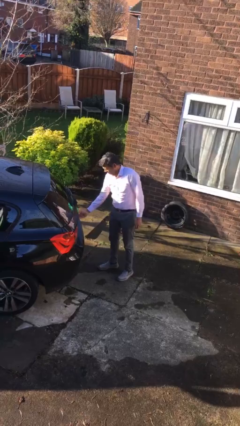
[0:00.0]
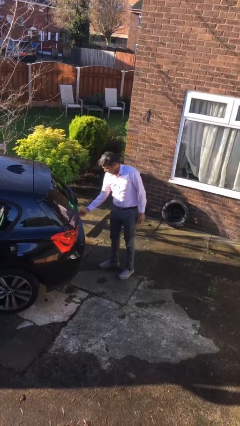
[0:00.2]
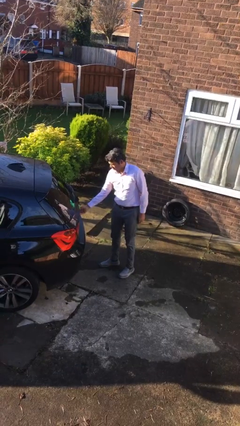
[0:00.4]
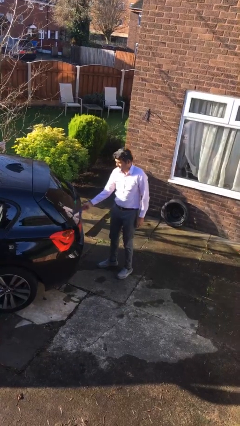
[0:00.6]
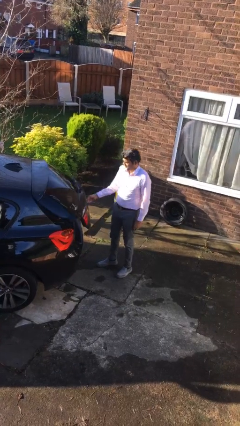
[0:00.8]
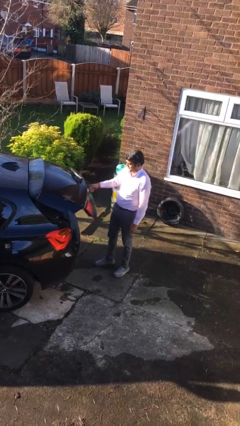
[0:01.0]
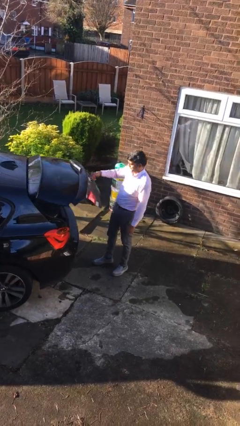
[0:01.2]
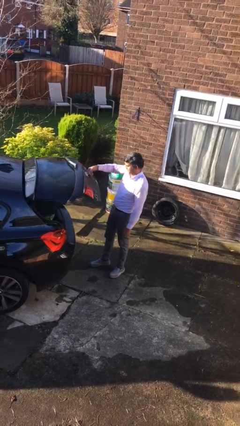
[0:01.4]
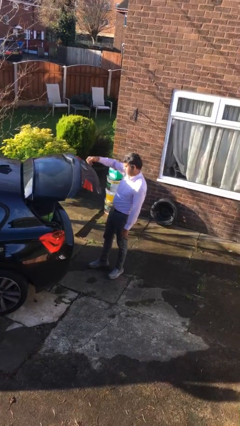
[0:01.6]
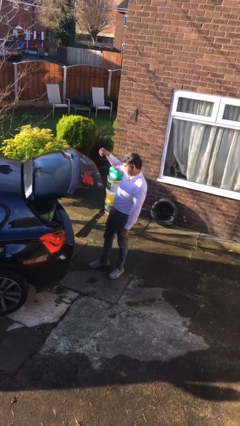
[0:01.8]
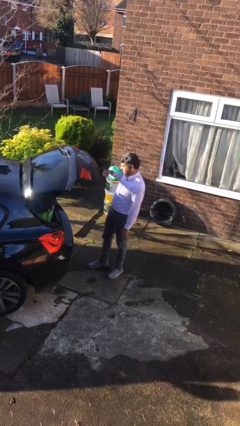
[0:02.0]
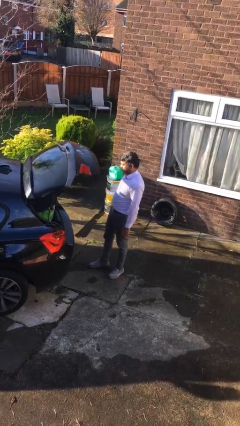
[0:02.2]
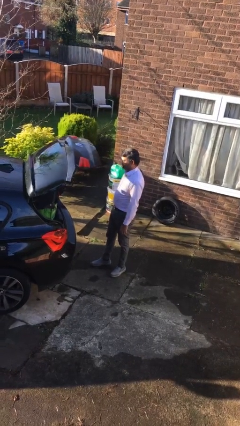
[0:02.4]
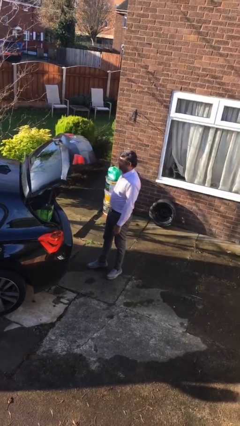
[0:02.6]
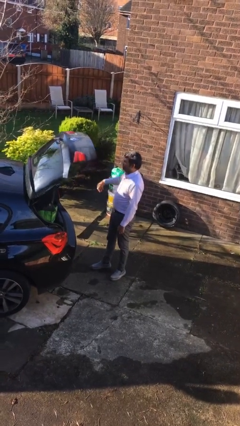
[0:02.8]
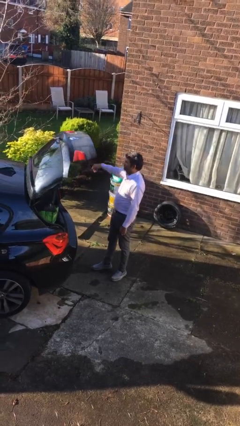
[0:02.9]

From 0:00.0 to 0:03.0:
person opens car trunk

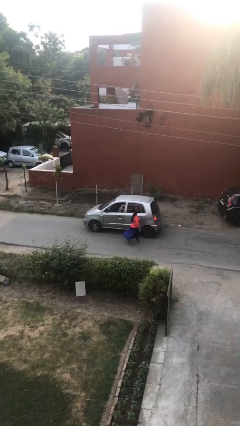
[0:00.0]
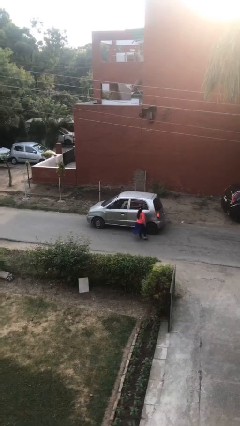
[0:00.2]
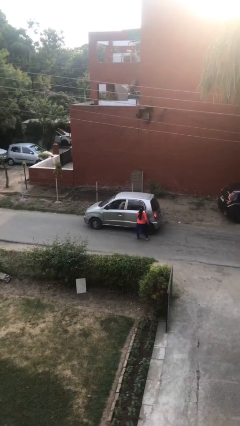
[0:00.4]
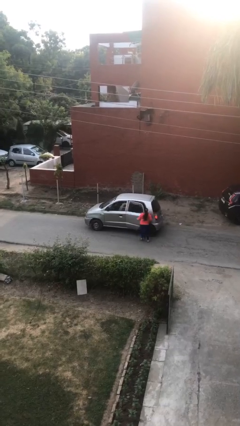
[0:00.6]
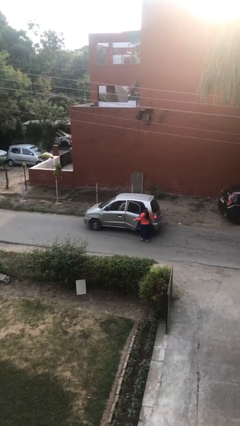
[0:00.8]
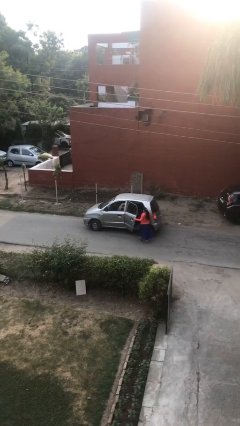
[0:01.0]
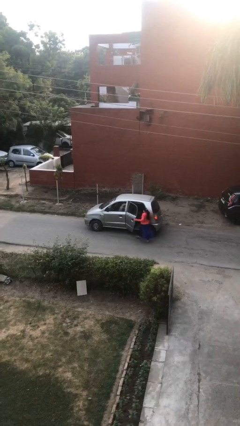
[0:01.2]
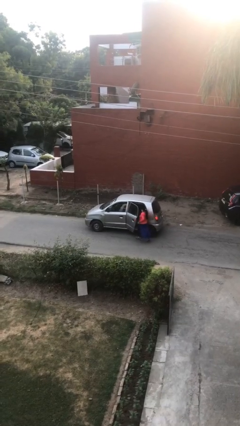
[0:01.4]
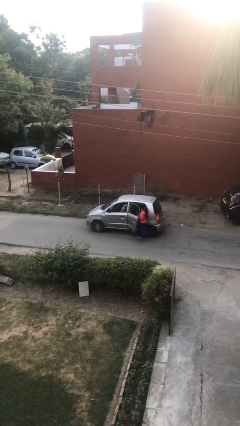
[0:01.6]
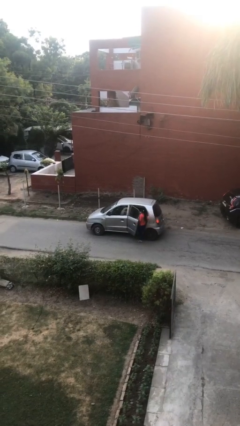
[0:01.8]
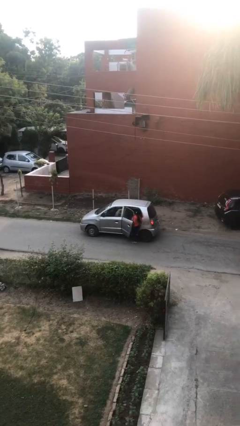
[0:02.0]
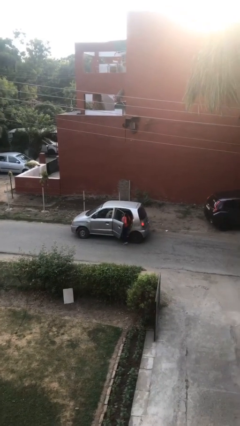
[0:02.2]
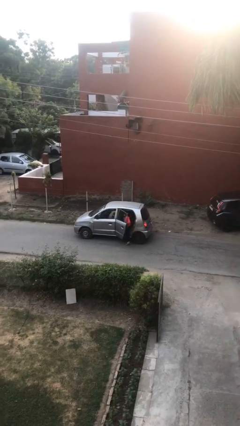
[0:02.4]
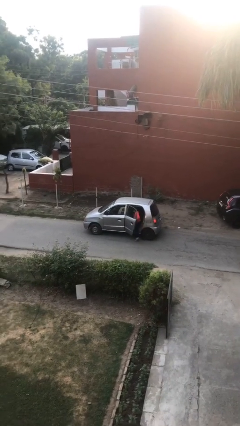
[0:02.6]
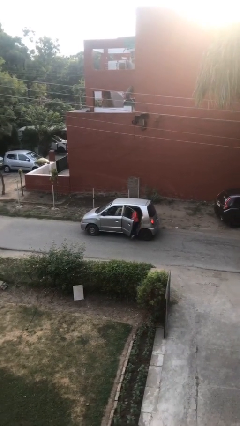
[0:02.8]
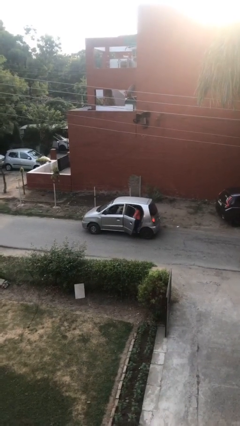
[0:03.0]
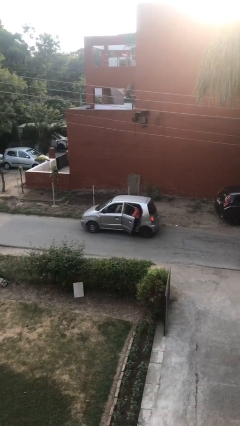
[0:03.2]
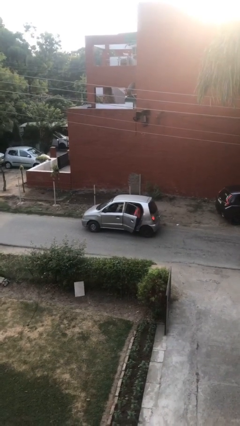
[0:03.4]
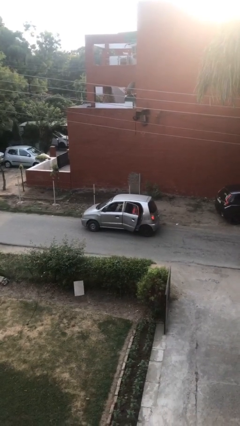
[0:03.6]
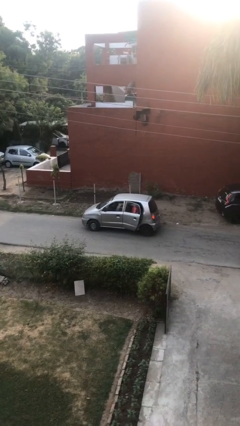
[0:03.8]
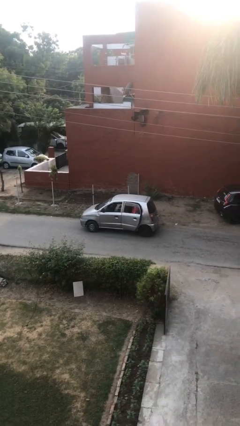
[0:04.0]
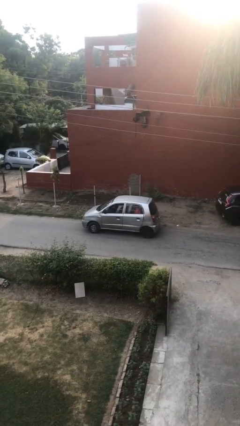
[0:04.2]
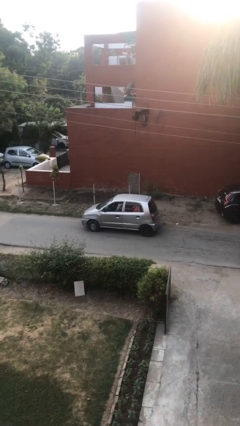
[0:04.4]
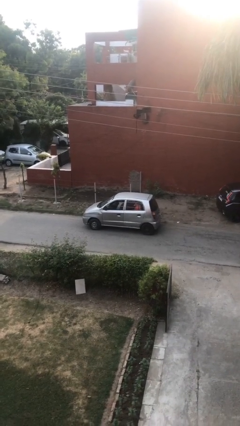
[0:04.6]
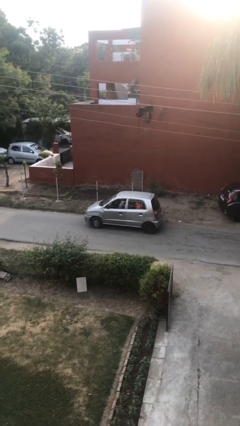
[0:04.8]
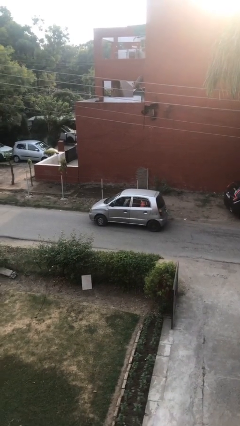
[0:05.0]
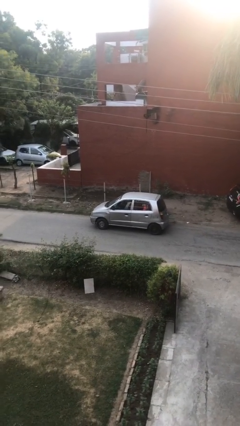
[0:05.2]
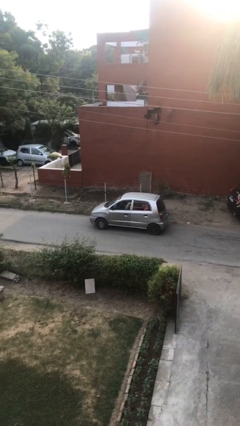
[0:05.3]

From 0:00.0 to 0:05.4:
car picks up person

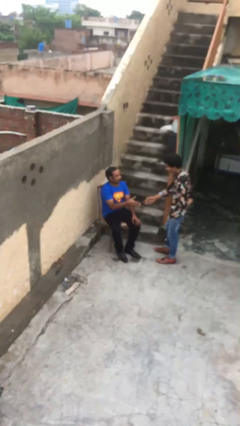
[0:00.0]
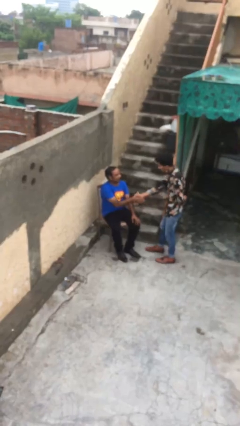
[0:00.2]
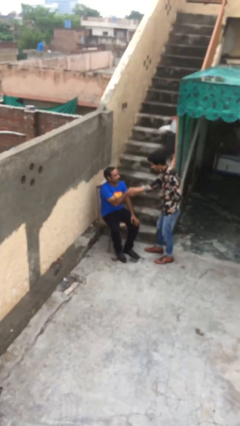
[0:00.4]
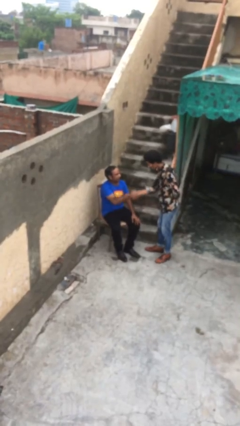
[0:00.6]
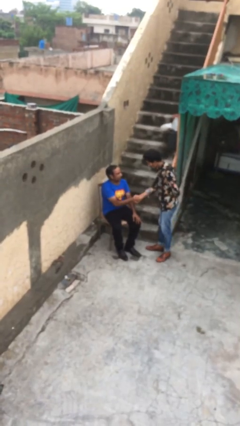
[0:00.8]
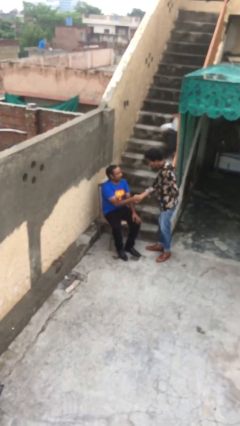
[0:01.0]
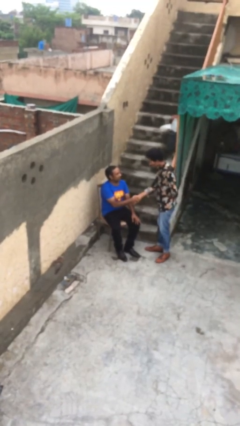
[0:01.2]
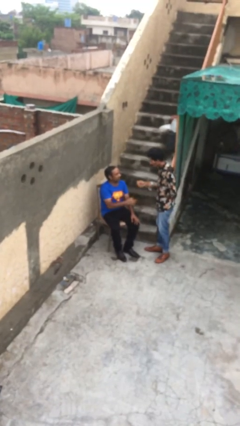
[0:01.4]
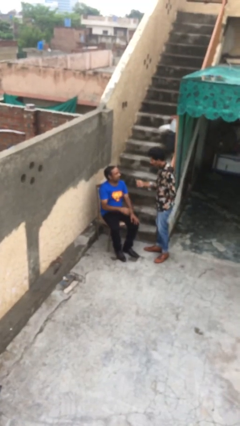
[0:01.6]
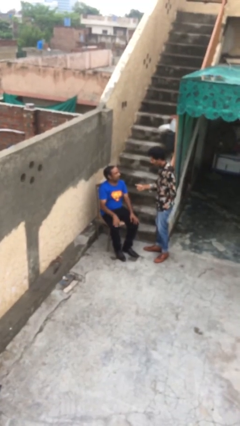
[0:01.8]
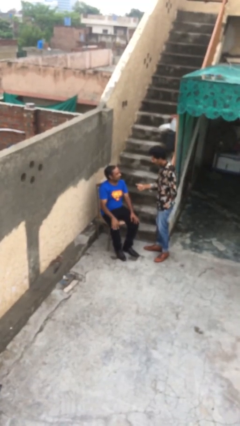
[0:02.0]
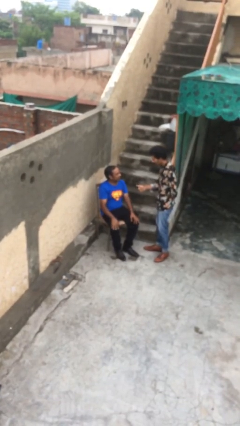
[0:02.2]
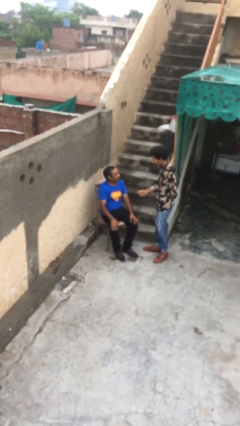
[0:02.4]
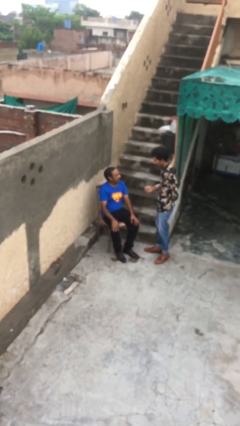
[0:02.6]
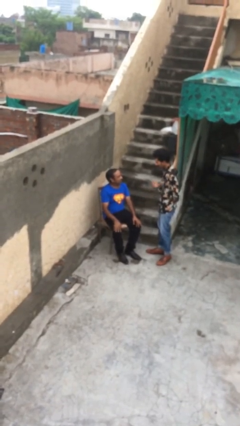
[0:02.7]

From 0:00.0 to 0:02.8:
person shakes hand

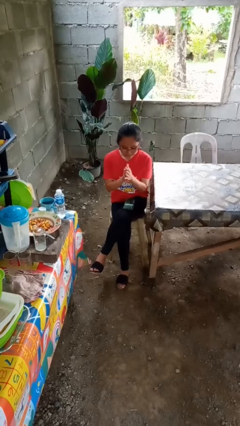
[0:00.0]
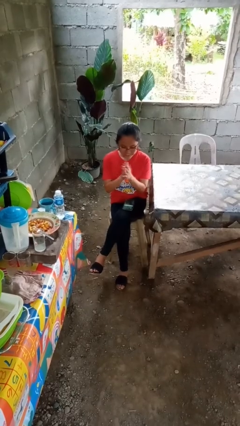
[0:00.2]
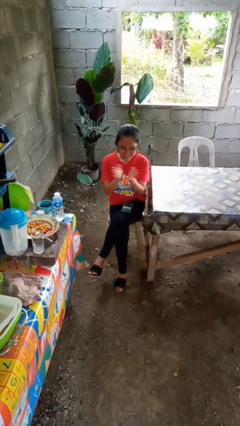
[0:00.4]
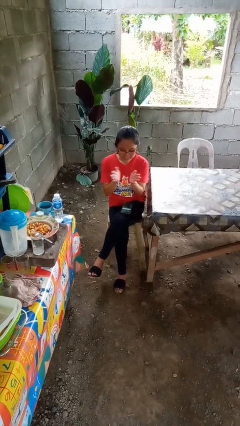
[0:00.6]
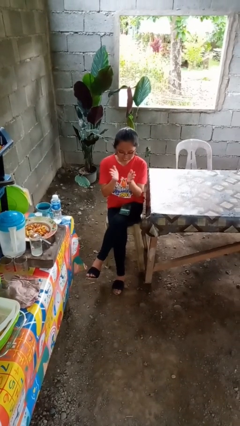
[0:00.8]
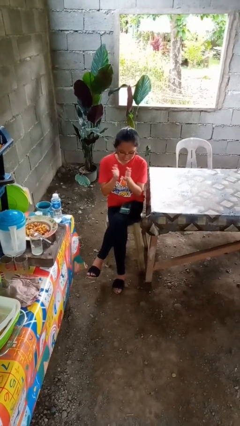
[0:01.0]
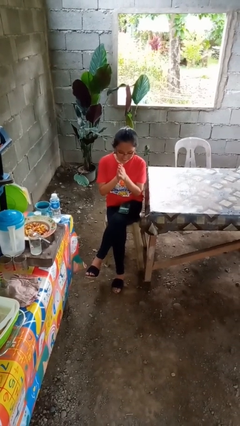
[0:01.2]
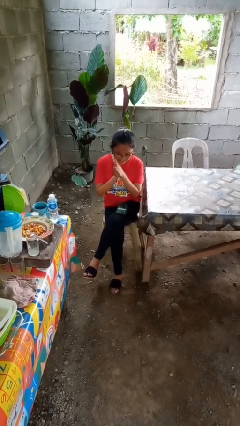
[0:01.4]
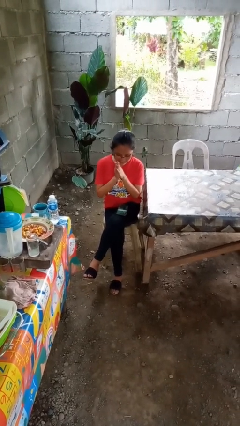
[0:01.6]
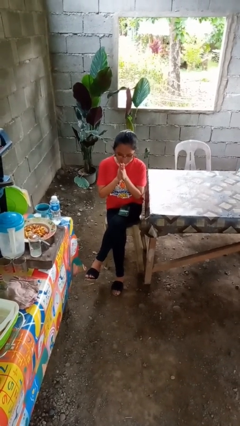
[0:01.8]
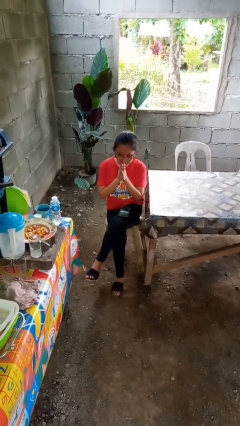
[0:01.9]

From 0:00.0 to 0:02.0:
person claps hands

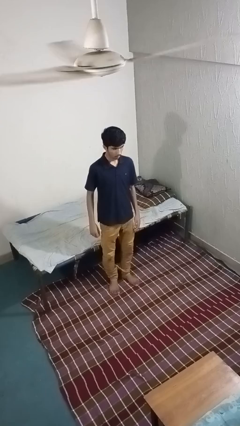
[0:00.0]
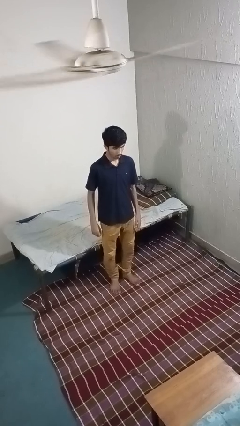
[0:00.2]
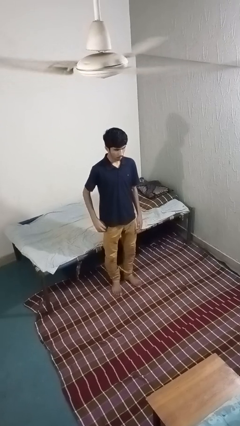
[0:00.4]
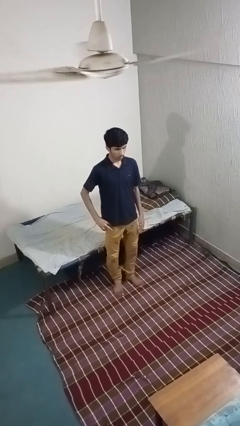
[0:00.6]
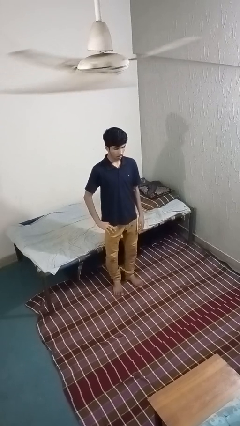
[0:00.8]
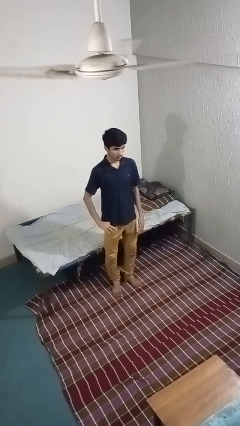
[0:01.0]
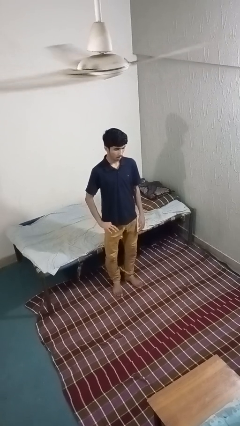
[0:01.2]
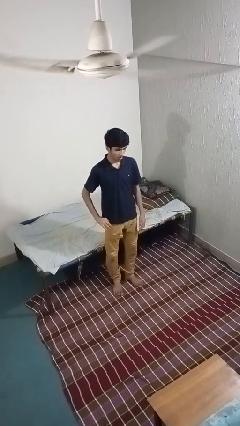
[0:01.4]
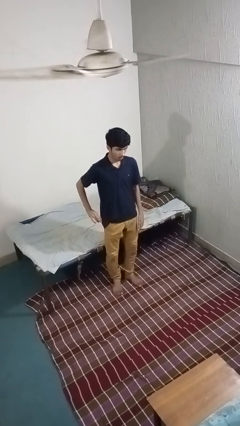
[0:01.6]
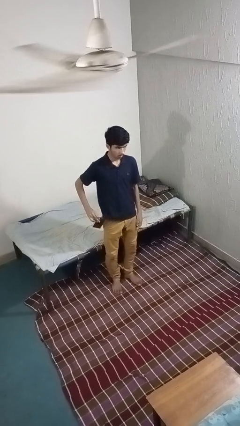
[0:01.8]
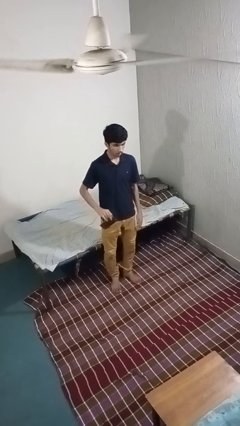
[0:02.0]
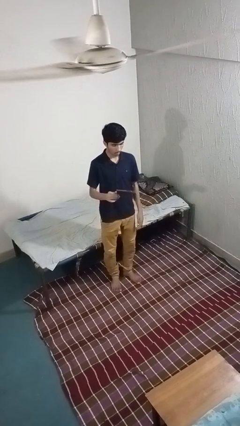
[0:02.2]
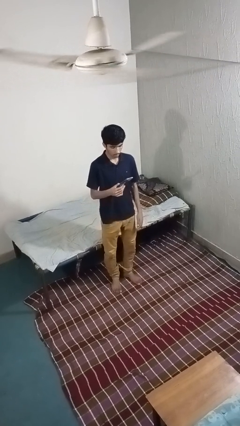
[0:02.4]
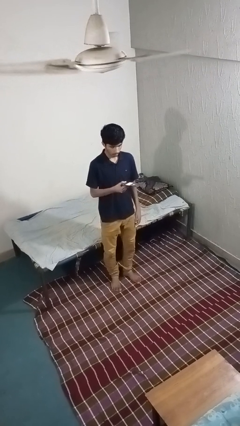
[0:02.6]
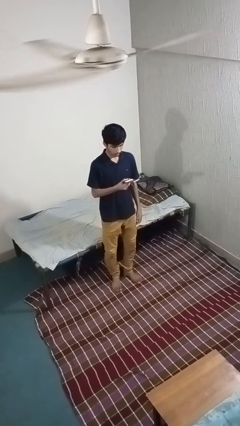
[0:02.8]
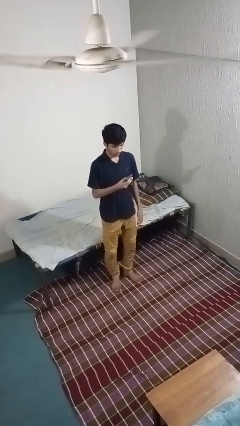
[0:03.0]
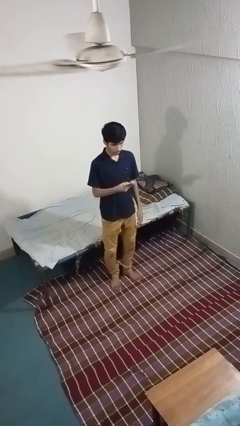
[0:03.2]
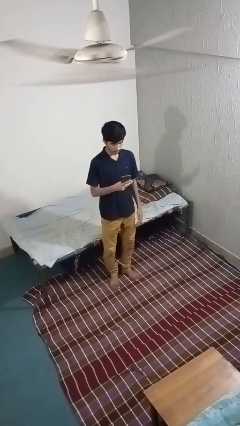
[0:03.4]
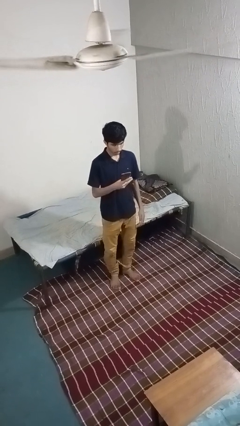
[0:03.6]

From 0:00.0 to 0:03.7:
person takes phone from pocket

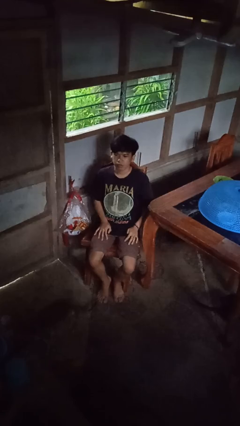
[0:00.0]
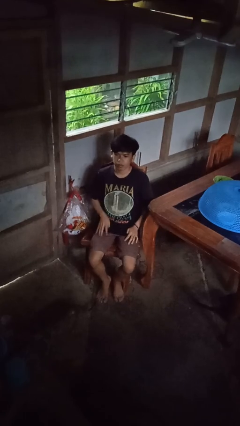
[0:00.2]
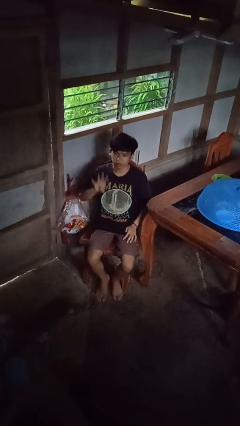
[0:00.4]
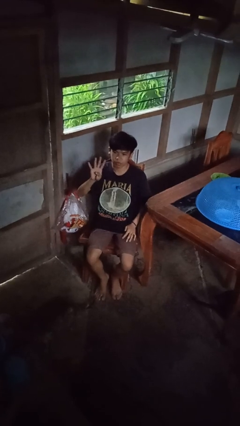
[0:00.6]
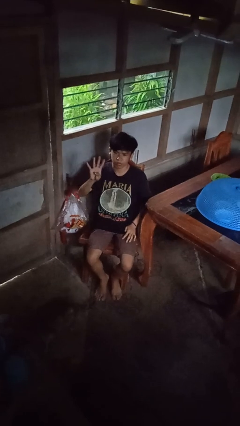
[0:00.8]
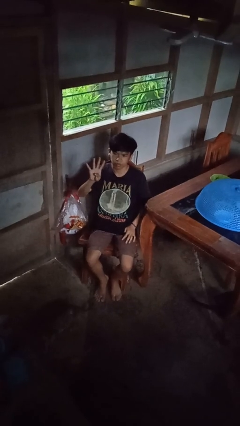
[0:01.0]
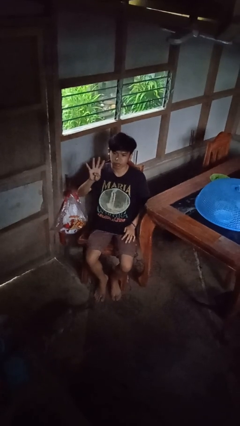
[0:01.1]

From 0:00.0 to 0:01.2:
person gestures number four
